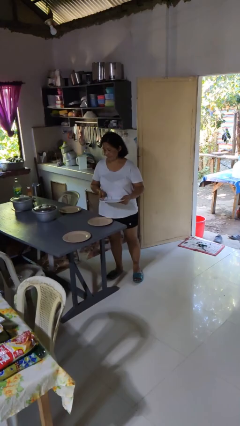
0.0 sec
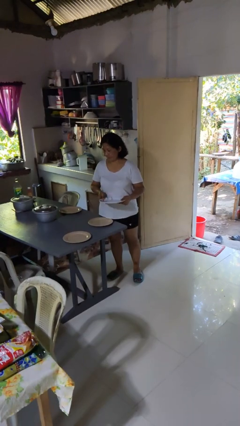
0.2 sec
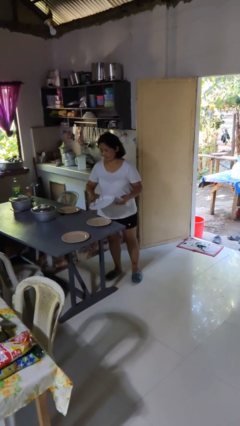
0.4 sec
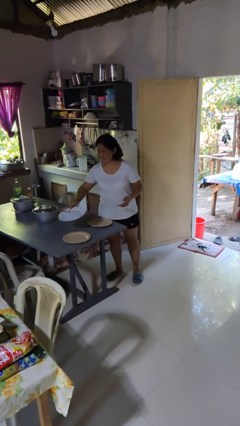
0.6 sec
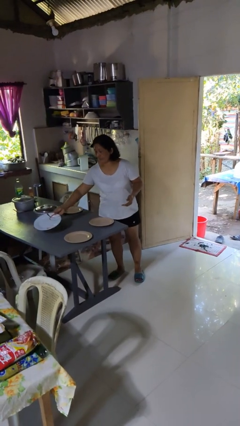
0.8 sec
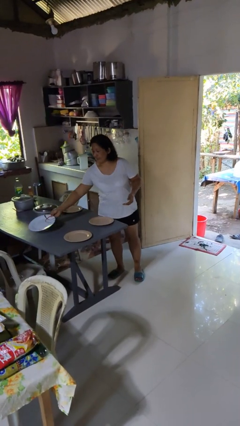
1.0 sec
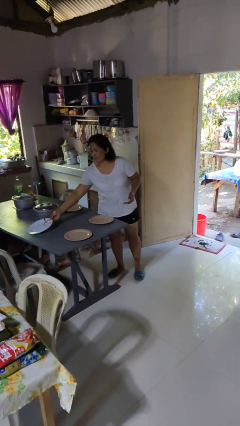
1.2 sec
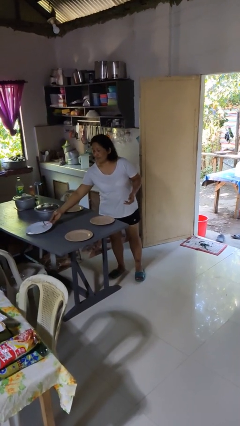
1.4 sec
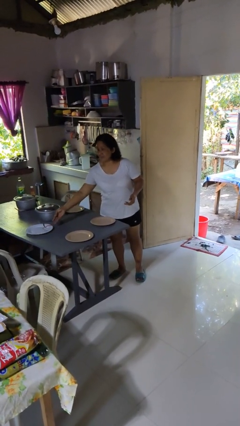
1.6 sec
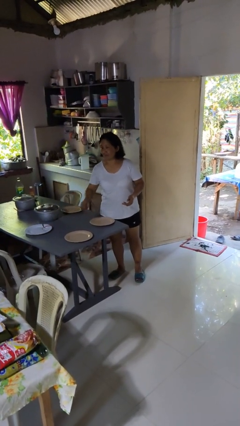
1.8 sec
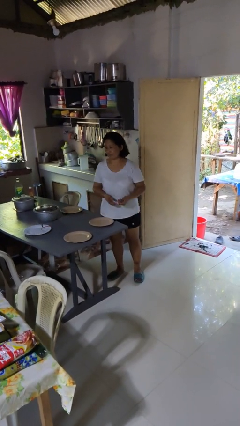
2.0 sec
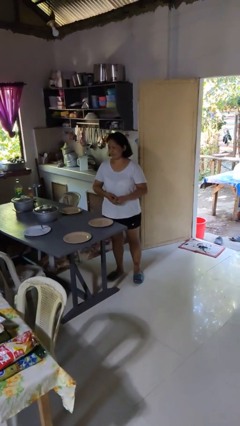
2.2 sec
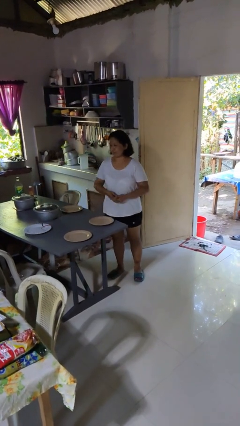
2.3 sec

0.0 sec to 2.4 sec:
person sets table

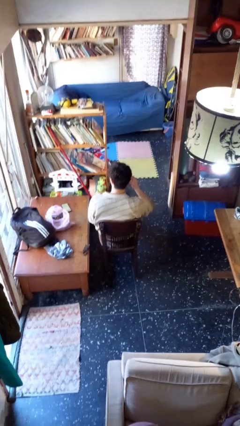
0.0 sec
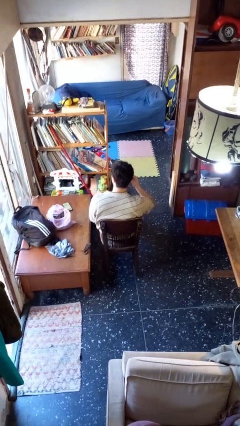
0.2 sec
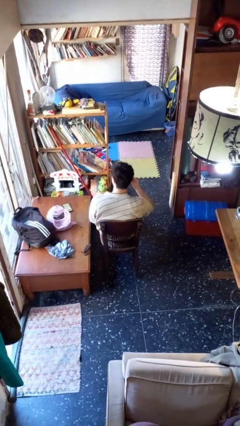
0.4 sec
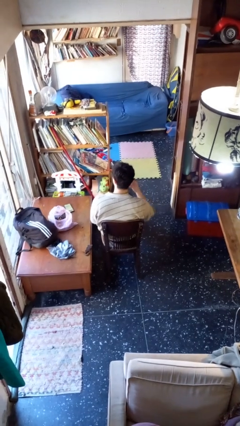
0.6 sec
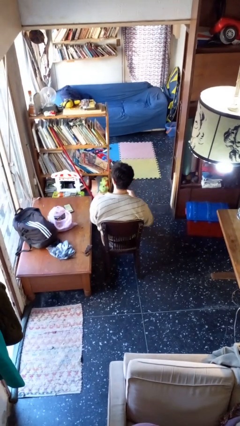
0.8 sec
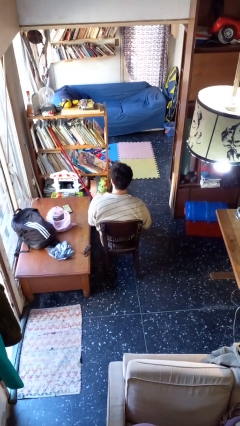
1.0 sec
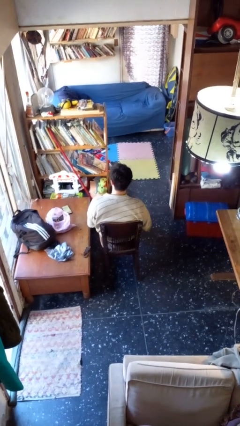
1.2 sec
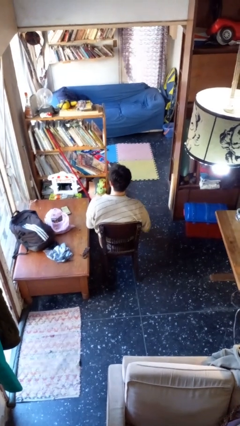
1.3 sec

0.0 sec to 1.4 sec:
person takes off earrings

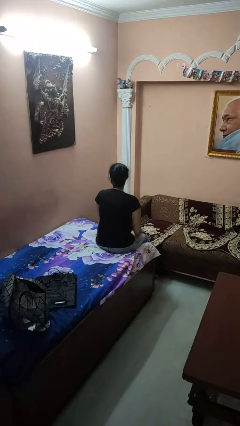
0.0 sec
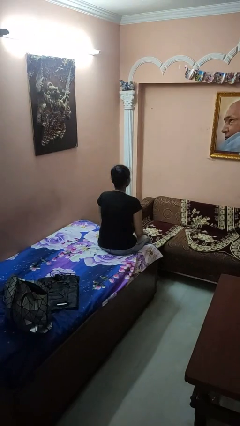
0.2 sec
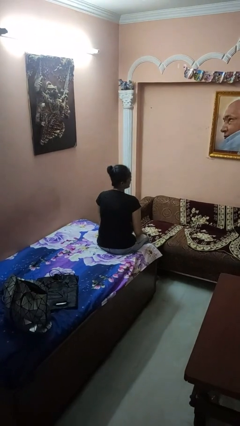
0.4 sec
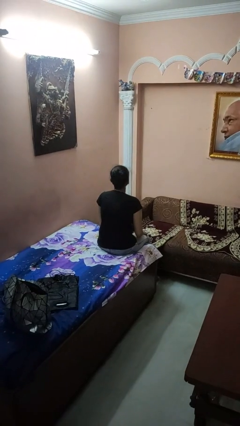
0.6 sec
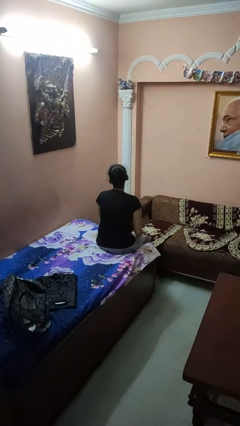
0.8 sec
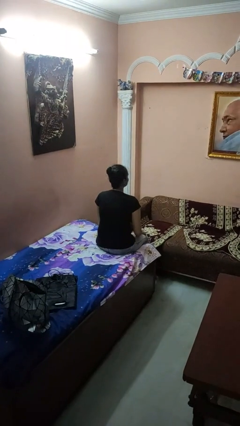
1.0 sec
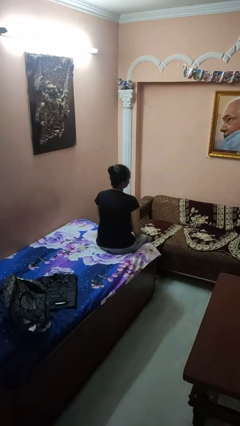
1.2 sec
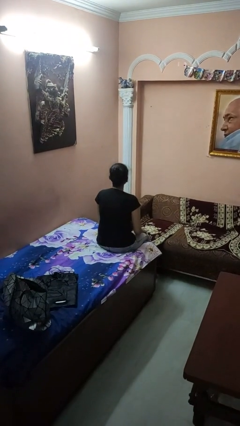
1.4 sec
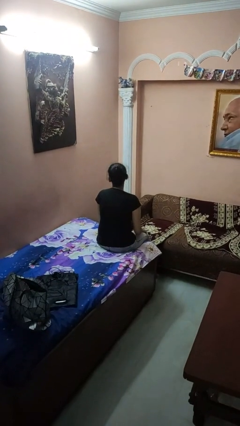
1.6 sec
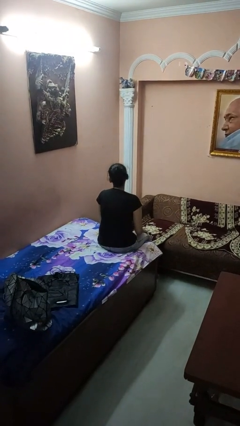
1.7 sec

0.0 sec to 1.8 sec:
person shakes head

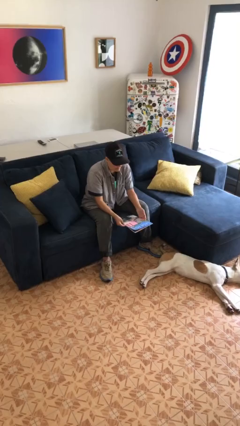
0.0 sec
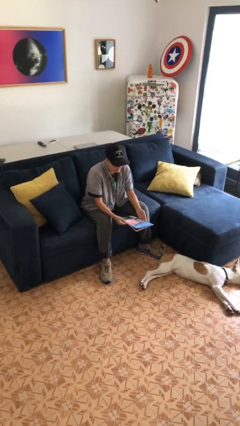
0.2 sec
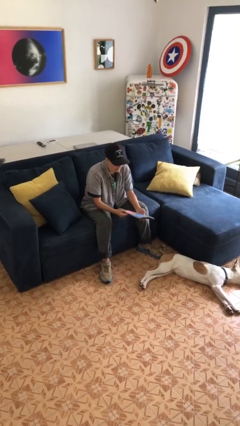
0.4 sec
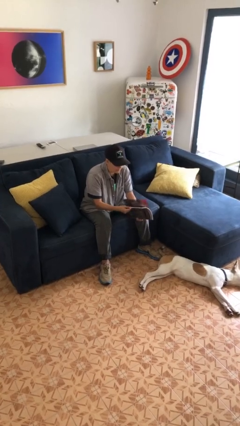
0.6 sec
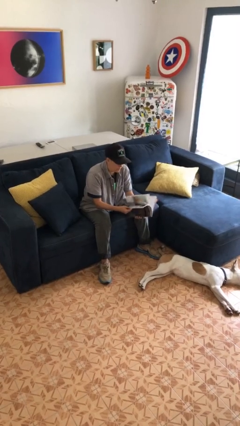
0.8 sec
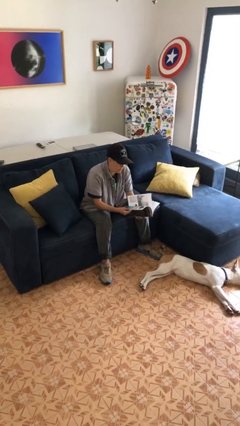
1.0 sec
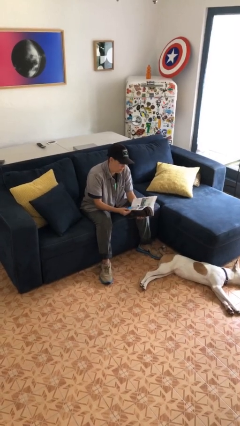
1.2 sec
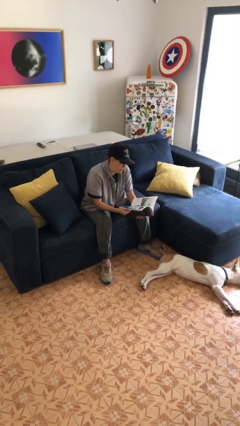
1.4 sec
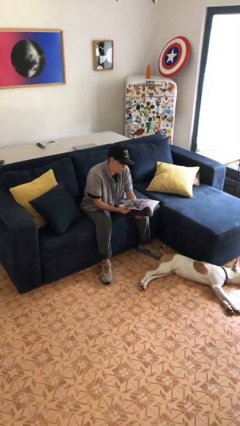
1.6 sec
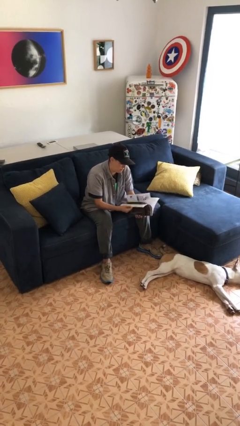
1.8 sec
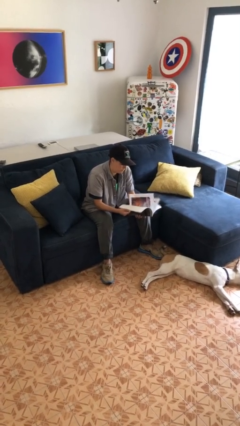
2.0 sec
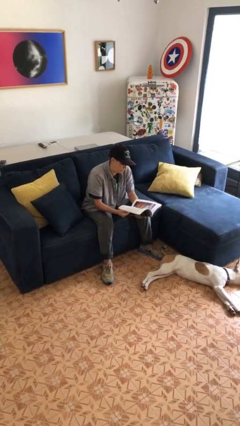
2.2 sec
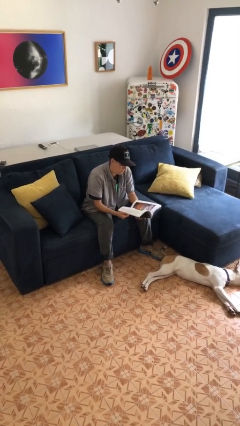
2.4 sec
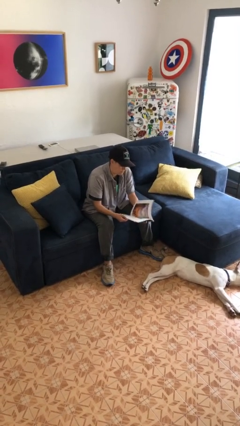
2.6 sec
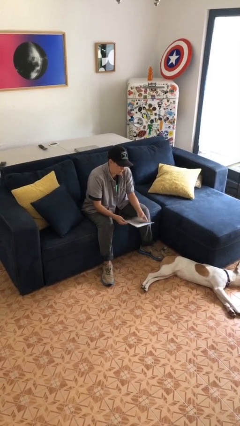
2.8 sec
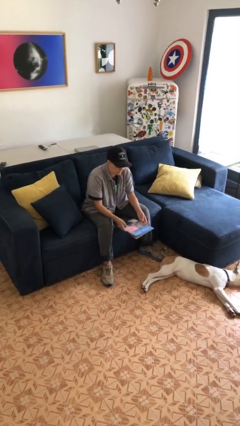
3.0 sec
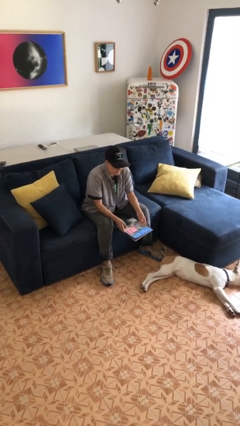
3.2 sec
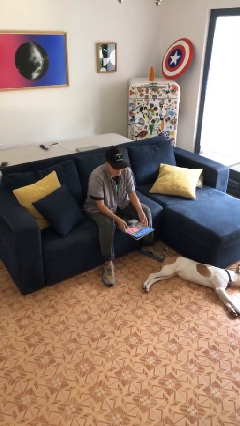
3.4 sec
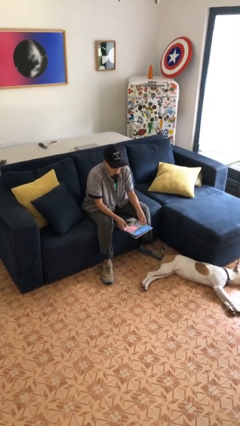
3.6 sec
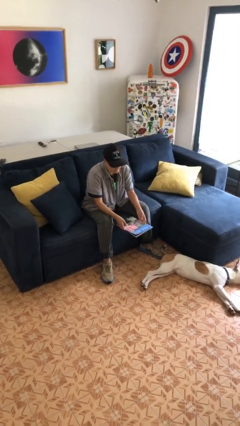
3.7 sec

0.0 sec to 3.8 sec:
person reads magazine

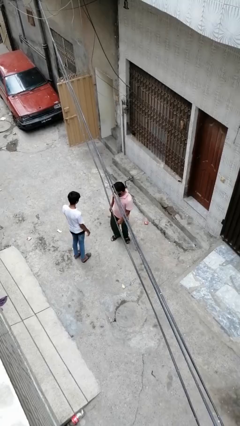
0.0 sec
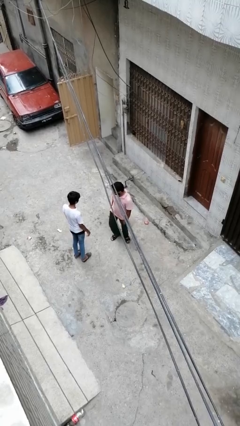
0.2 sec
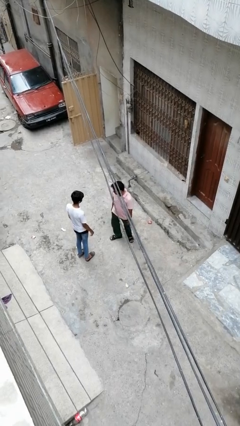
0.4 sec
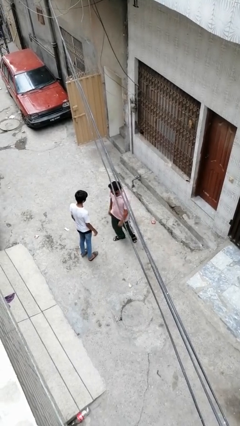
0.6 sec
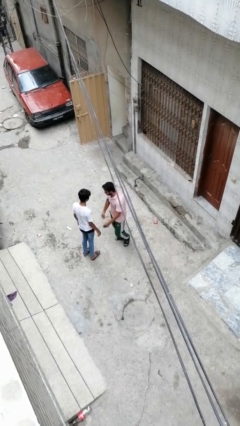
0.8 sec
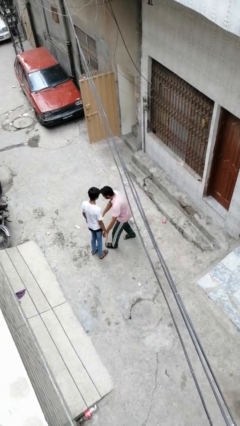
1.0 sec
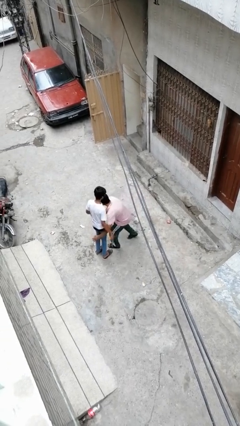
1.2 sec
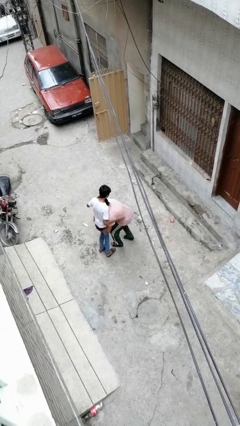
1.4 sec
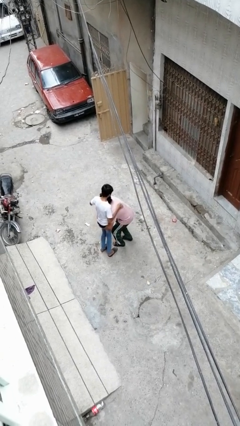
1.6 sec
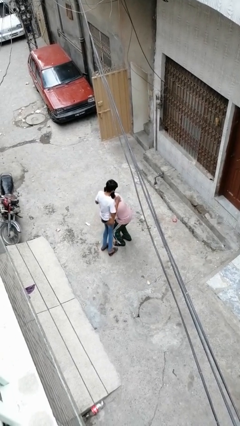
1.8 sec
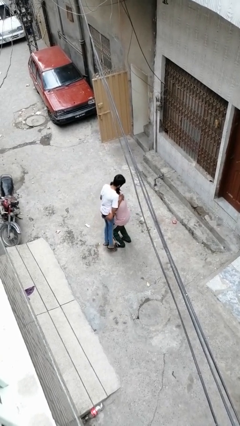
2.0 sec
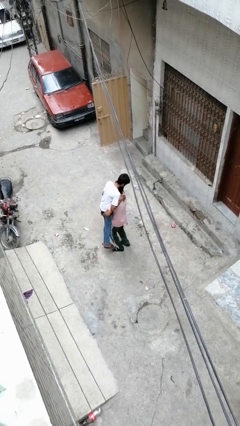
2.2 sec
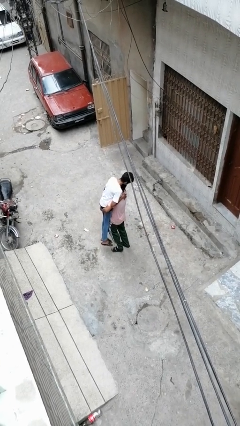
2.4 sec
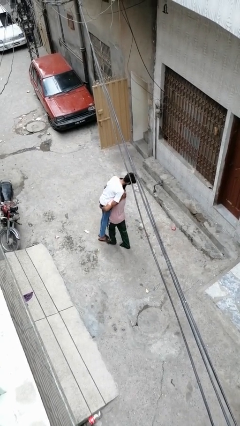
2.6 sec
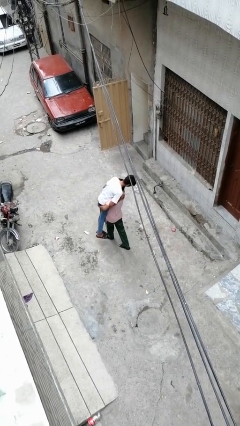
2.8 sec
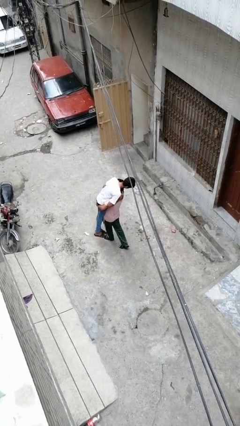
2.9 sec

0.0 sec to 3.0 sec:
person picks up person

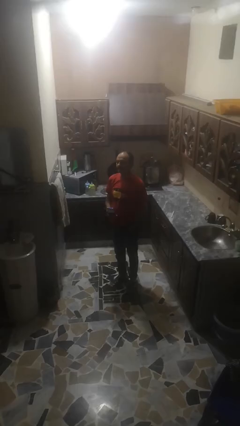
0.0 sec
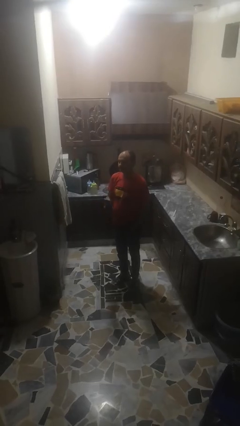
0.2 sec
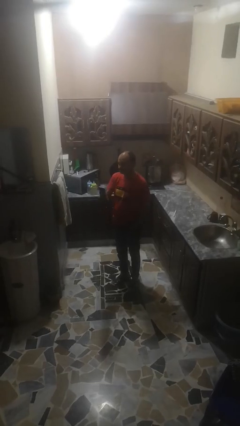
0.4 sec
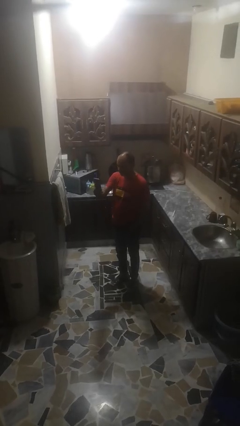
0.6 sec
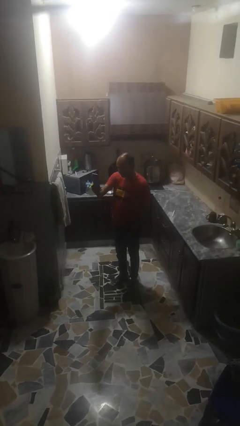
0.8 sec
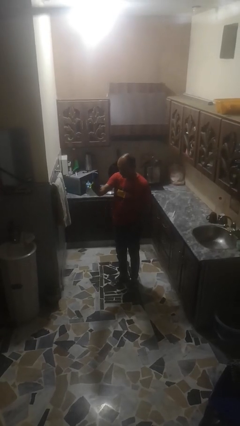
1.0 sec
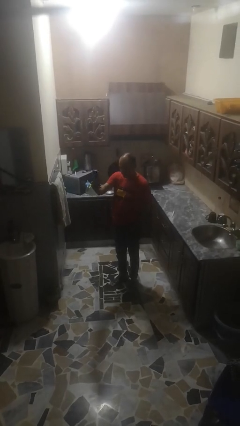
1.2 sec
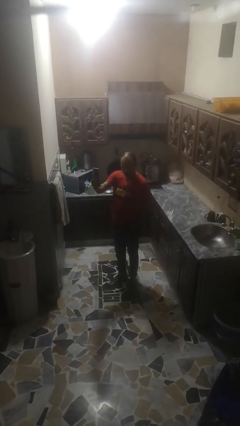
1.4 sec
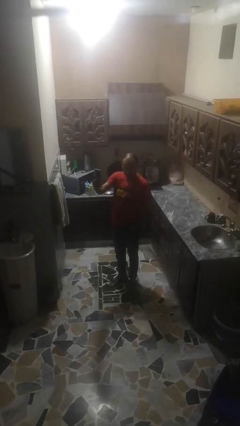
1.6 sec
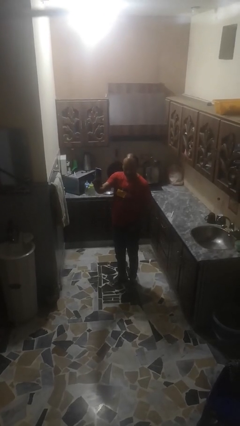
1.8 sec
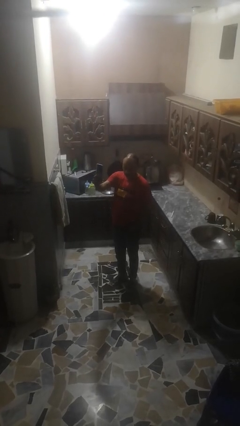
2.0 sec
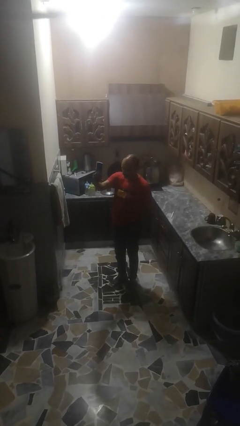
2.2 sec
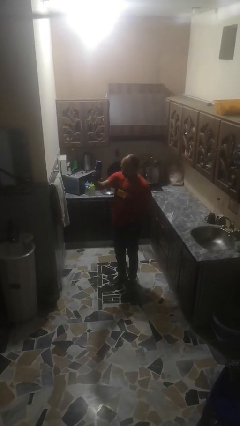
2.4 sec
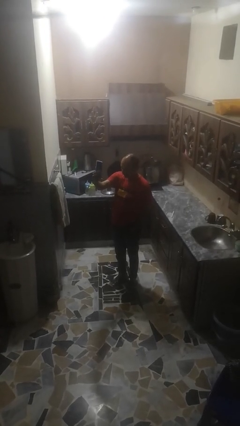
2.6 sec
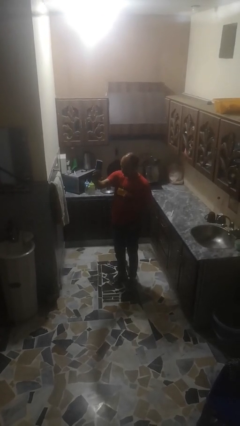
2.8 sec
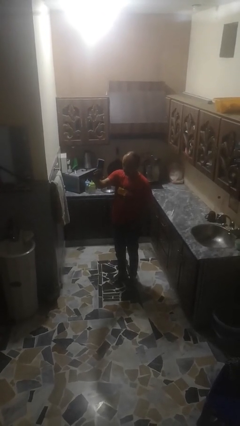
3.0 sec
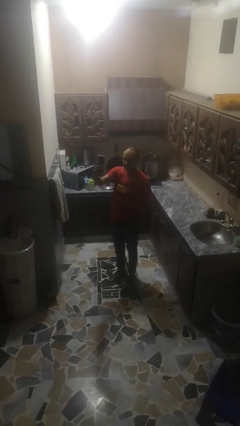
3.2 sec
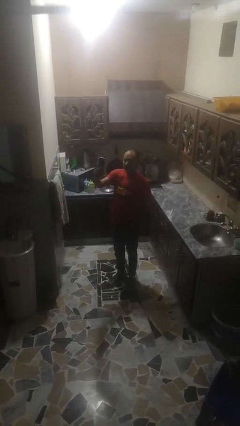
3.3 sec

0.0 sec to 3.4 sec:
person takes selfie

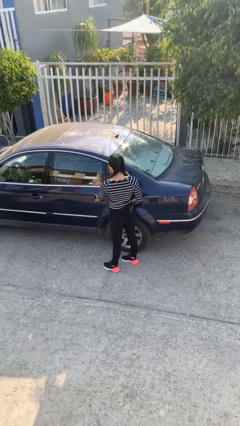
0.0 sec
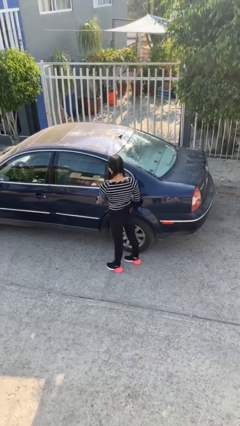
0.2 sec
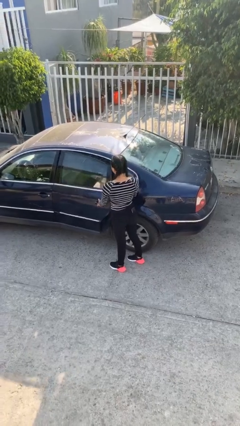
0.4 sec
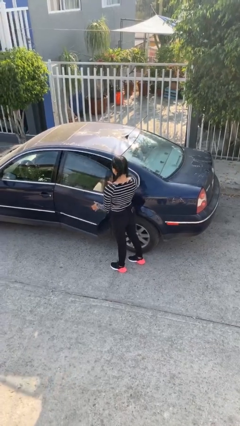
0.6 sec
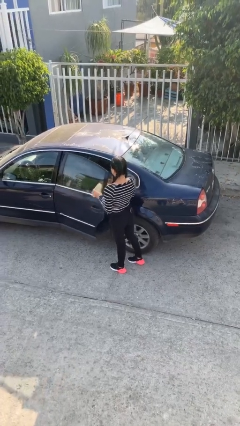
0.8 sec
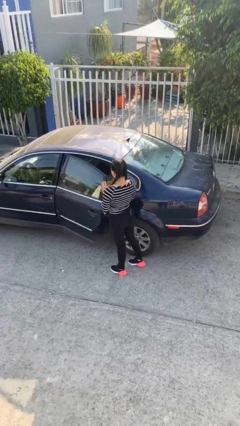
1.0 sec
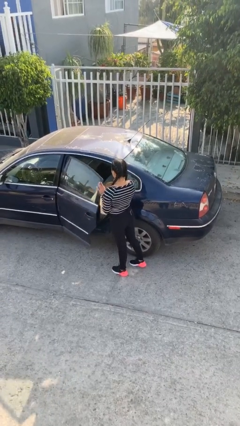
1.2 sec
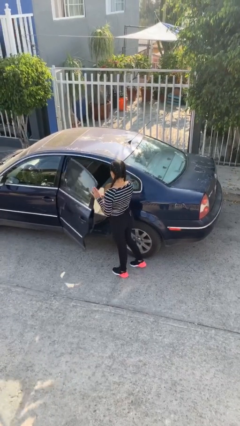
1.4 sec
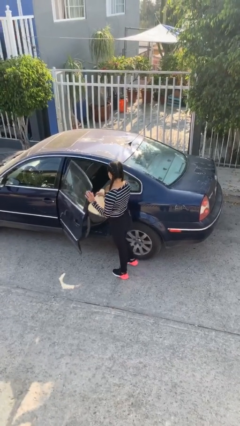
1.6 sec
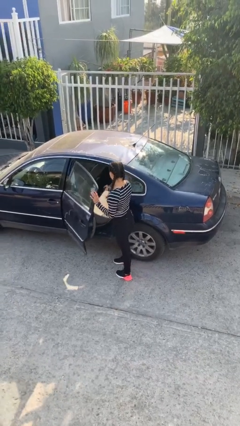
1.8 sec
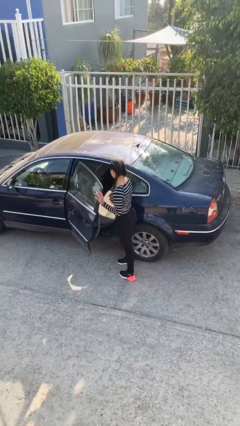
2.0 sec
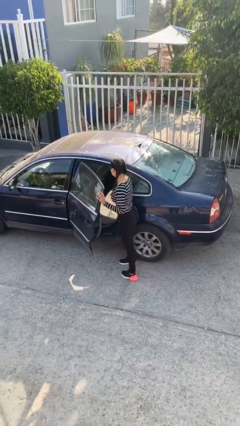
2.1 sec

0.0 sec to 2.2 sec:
person opens car door
